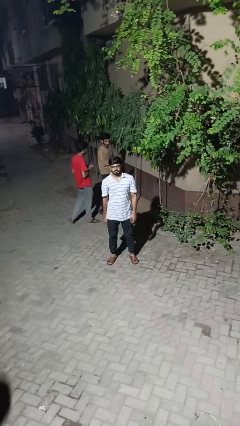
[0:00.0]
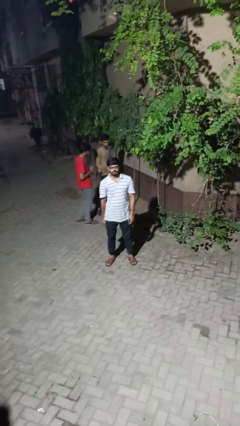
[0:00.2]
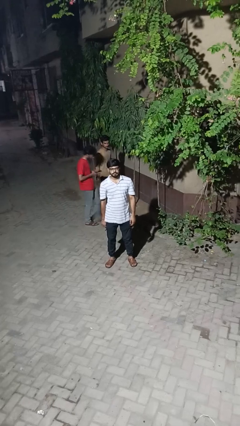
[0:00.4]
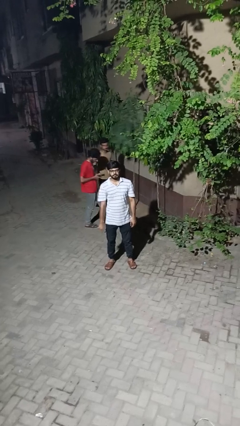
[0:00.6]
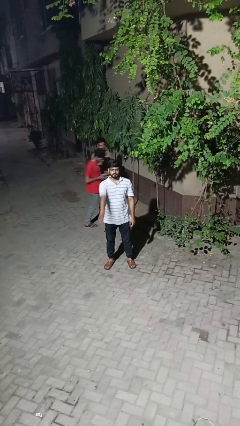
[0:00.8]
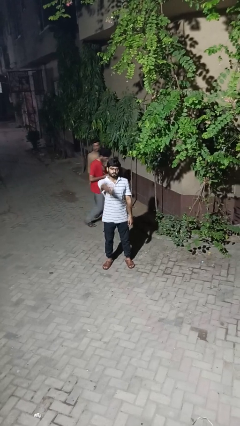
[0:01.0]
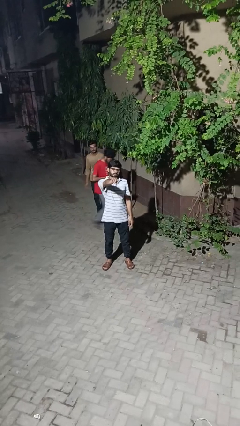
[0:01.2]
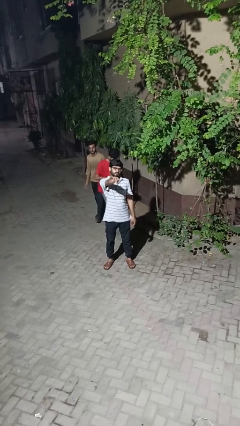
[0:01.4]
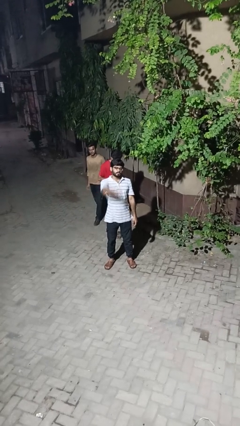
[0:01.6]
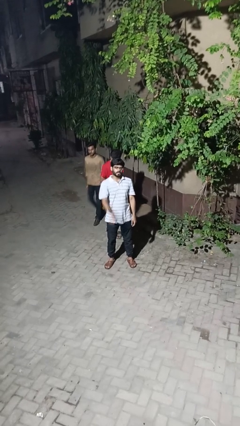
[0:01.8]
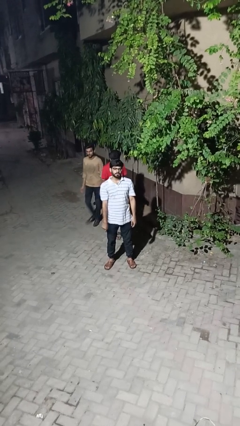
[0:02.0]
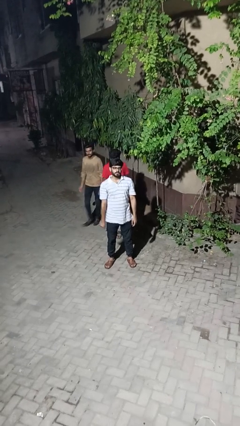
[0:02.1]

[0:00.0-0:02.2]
person points at person

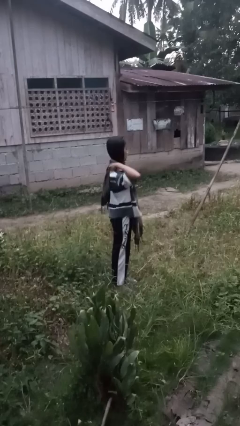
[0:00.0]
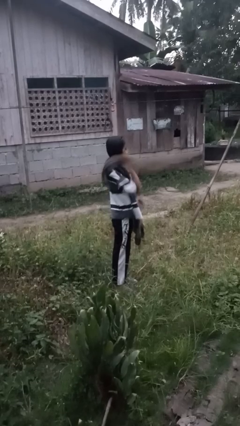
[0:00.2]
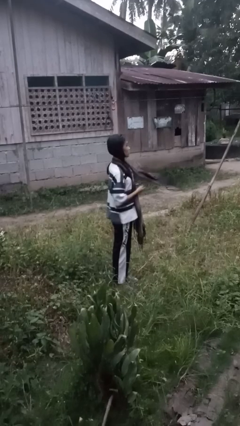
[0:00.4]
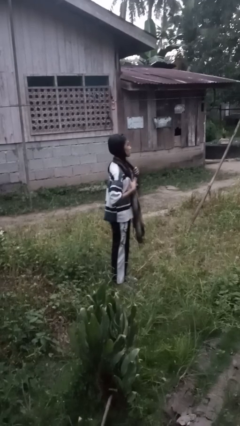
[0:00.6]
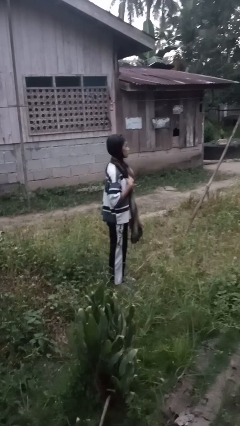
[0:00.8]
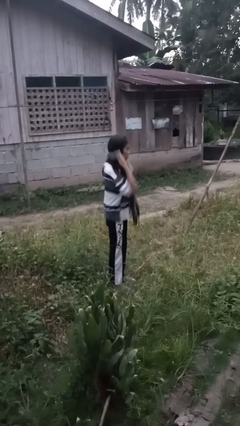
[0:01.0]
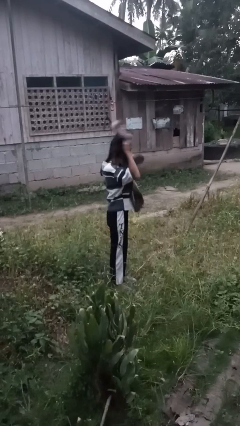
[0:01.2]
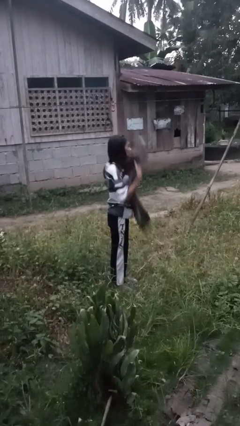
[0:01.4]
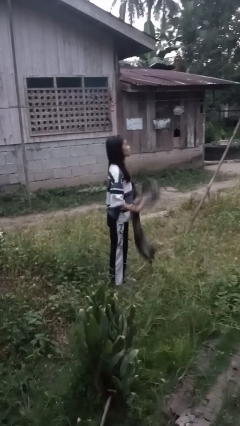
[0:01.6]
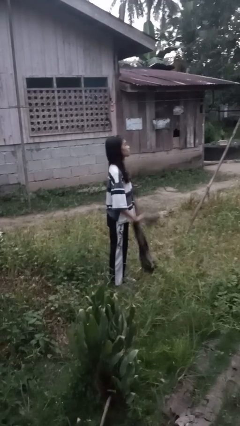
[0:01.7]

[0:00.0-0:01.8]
person takes off scarf

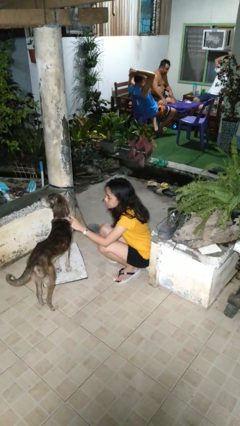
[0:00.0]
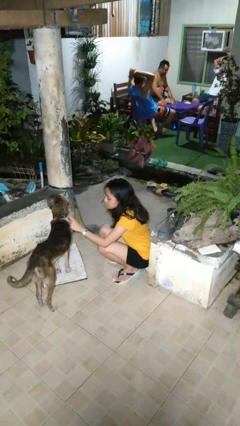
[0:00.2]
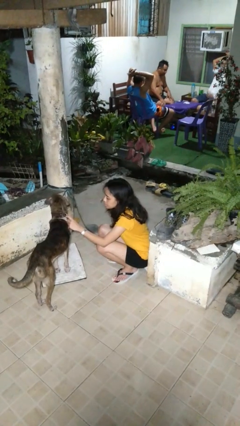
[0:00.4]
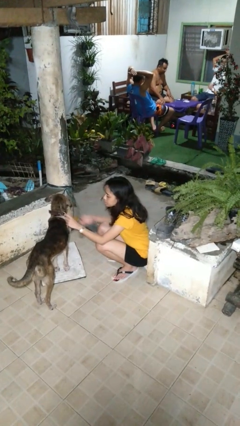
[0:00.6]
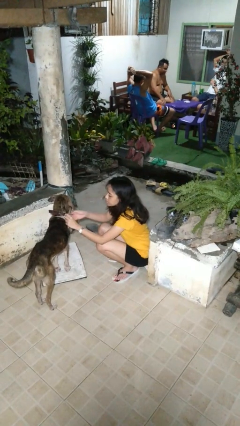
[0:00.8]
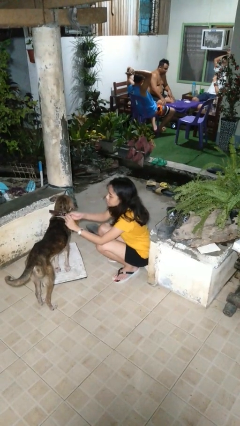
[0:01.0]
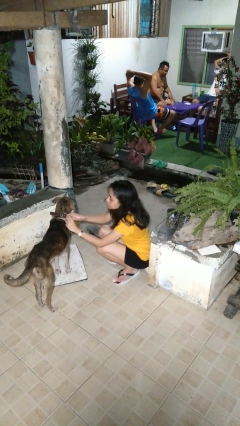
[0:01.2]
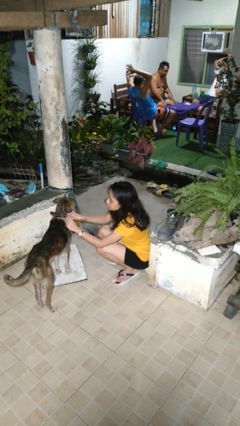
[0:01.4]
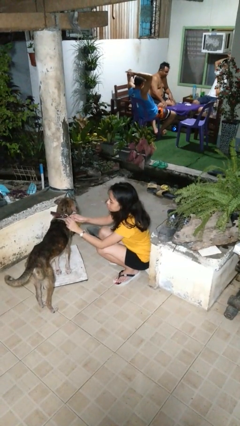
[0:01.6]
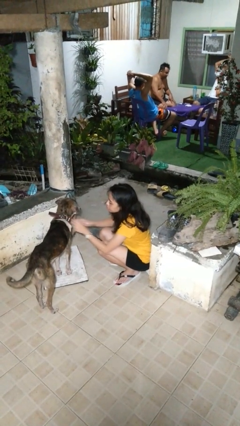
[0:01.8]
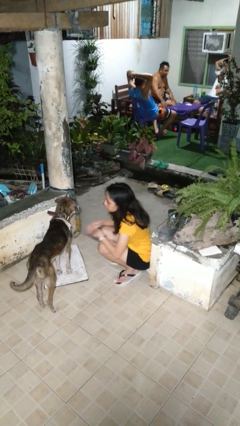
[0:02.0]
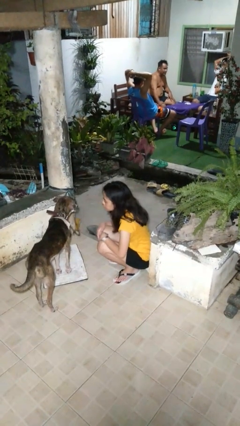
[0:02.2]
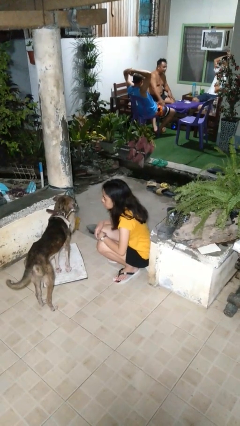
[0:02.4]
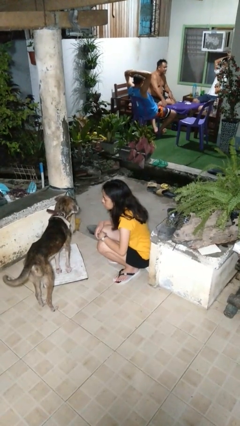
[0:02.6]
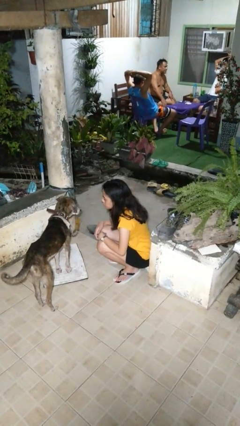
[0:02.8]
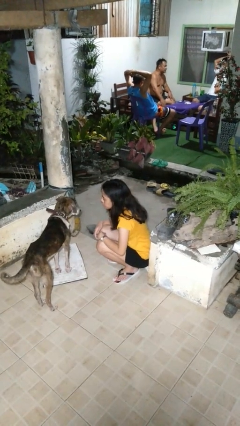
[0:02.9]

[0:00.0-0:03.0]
person attaches leash to dog

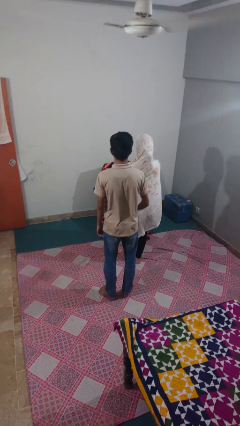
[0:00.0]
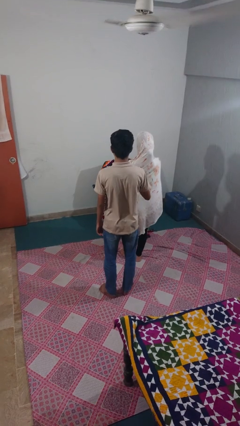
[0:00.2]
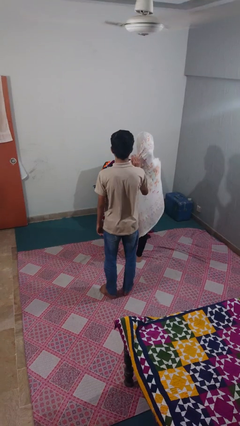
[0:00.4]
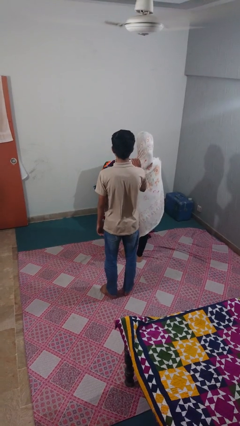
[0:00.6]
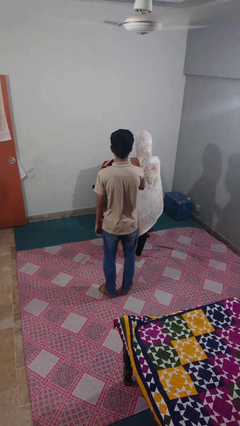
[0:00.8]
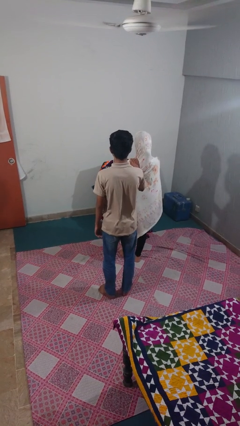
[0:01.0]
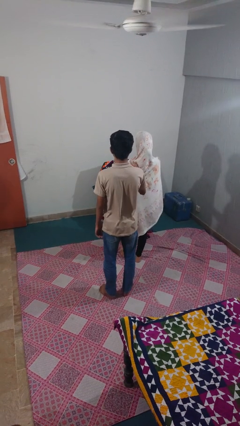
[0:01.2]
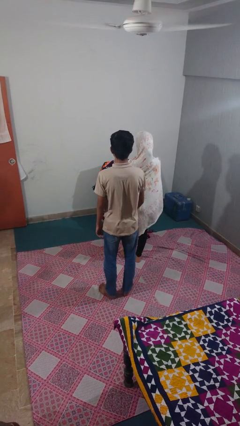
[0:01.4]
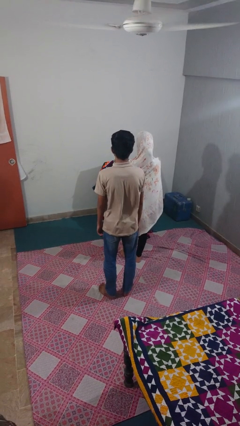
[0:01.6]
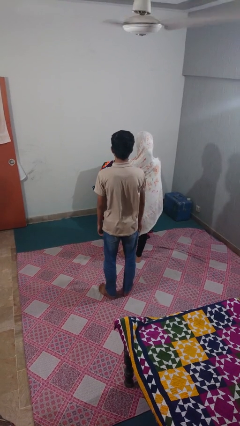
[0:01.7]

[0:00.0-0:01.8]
person touches back of person

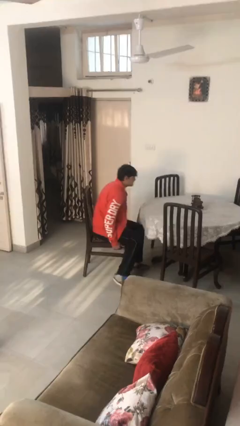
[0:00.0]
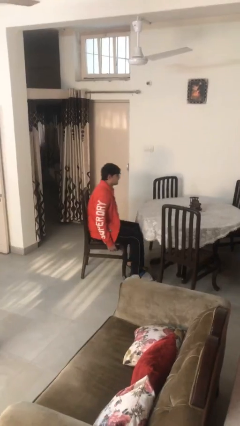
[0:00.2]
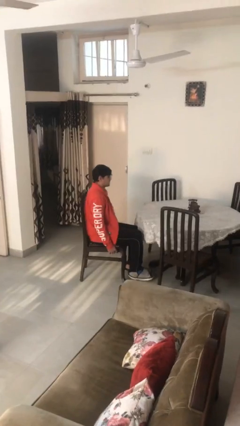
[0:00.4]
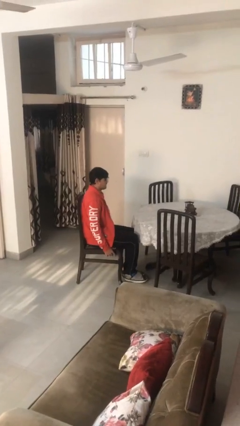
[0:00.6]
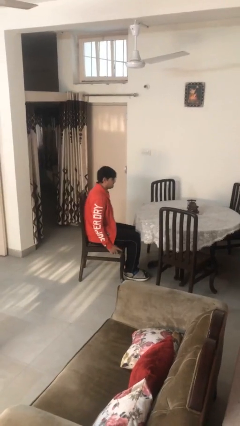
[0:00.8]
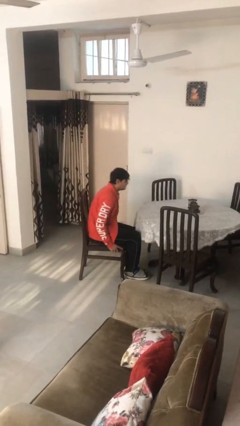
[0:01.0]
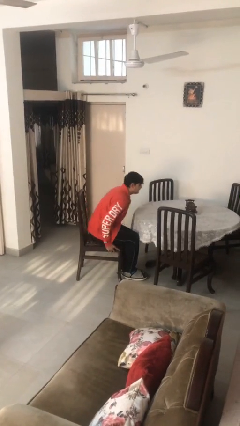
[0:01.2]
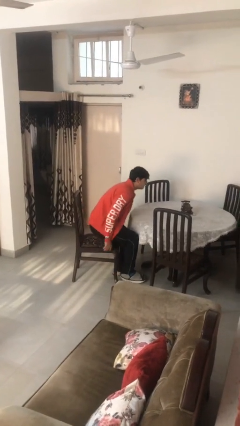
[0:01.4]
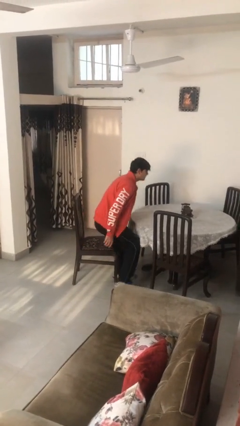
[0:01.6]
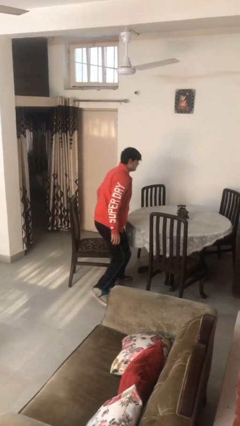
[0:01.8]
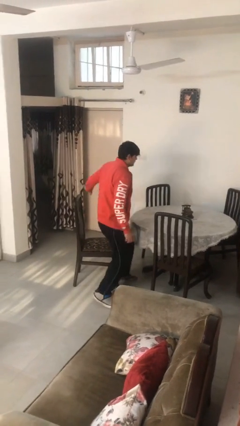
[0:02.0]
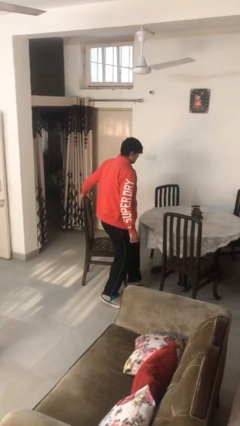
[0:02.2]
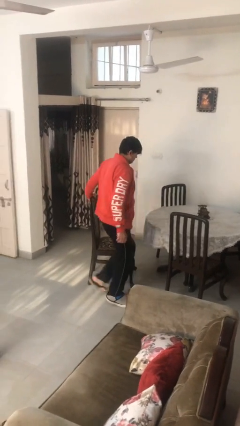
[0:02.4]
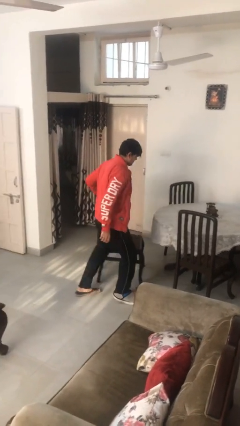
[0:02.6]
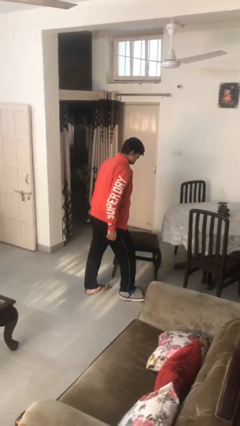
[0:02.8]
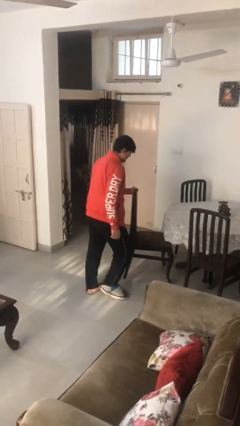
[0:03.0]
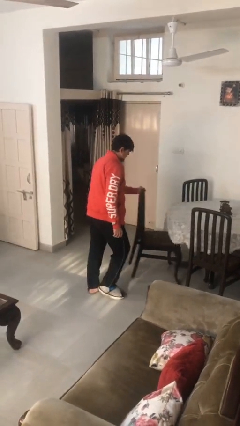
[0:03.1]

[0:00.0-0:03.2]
person stands up

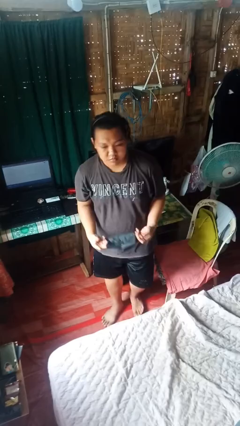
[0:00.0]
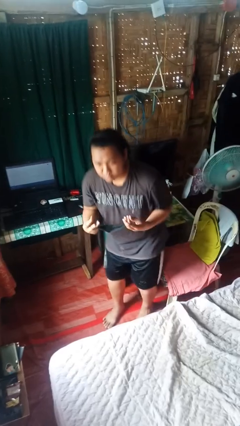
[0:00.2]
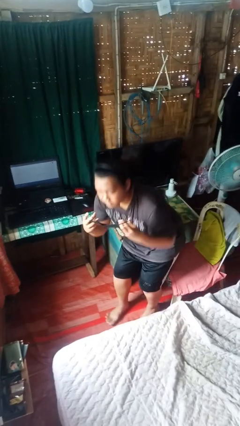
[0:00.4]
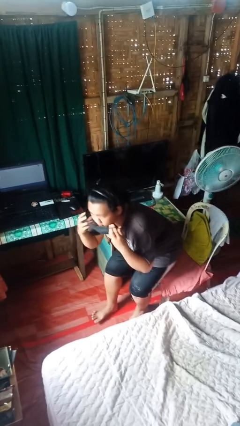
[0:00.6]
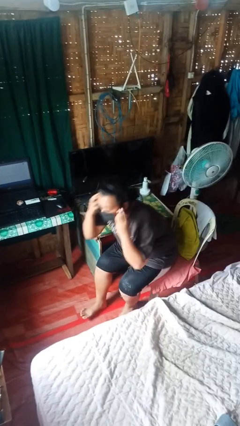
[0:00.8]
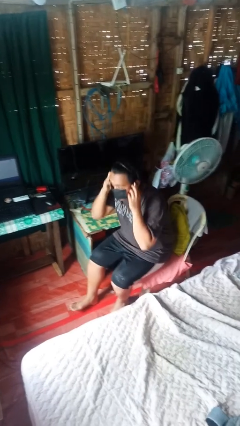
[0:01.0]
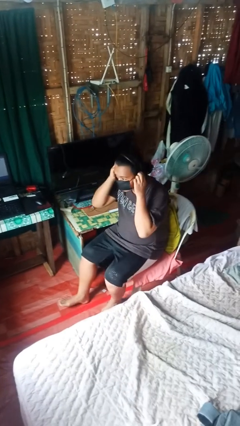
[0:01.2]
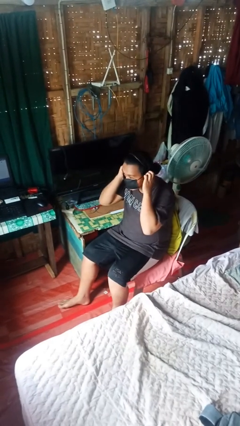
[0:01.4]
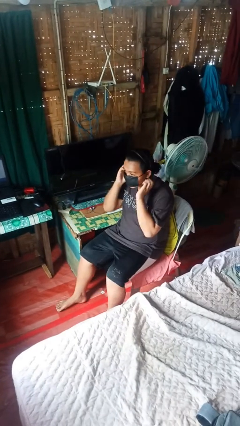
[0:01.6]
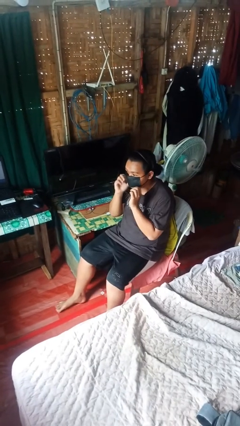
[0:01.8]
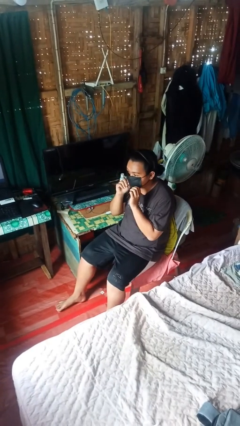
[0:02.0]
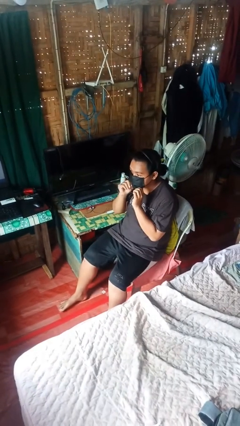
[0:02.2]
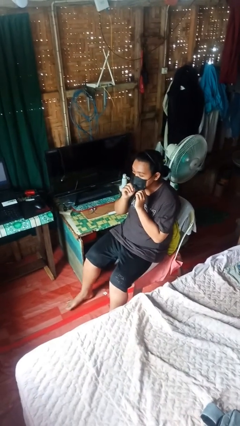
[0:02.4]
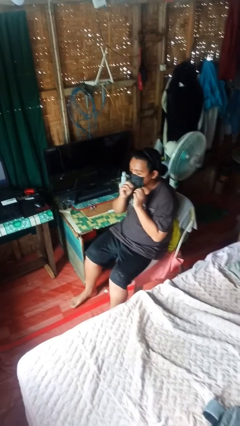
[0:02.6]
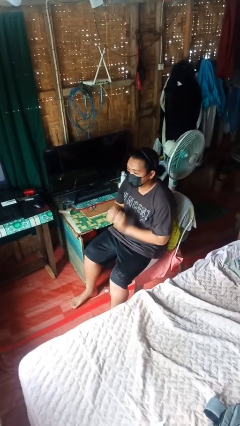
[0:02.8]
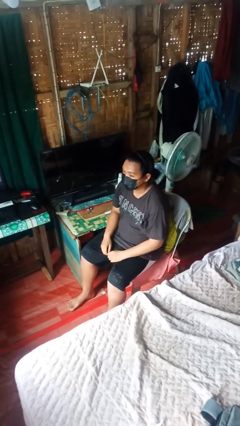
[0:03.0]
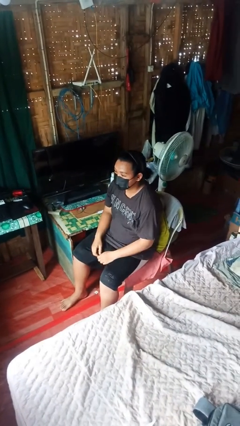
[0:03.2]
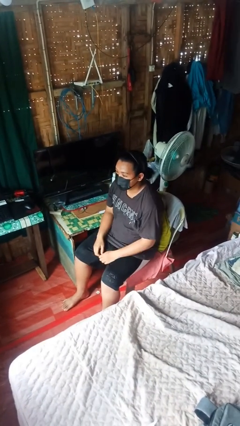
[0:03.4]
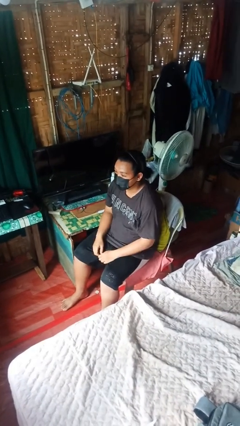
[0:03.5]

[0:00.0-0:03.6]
person puts on facemask

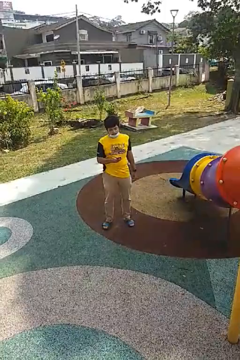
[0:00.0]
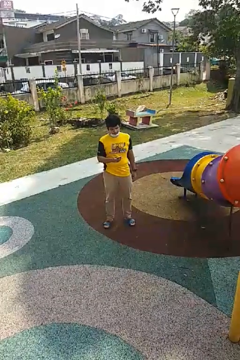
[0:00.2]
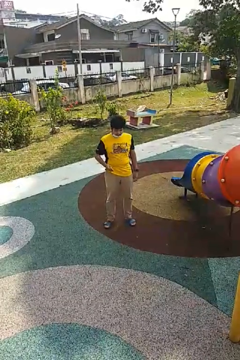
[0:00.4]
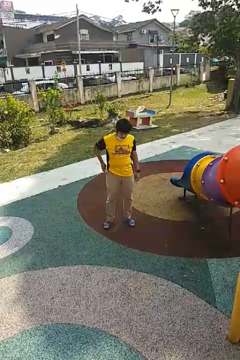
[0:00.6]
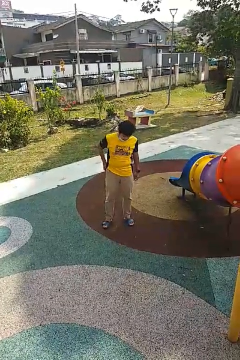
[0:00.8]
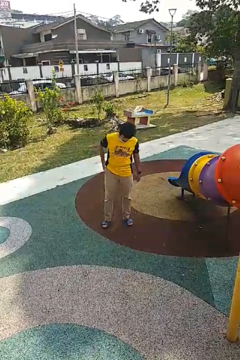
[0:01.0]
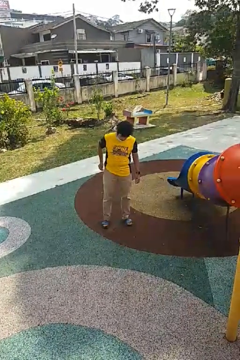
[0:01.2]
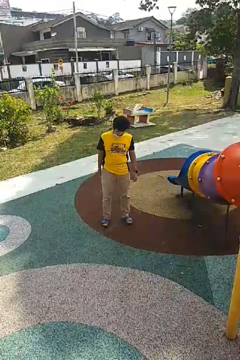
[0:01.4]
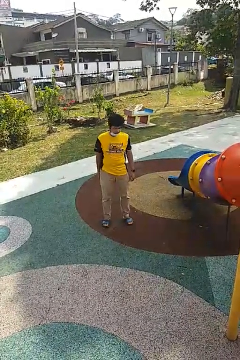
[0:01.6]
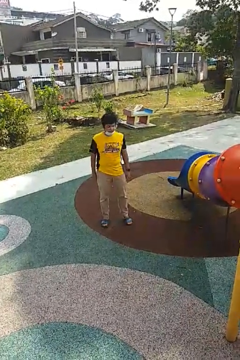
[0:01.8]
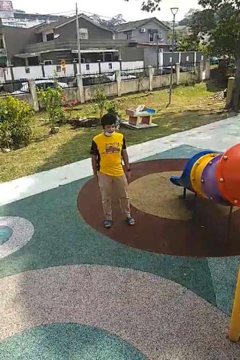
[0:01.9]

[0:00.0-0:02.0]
person puts phone into pocket
